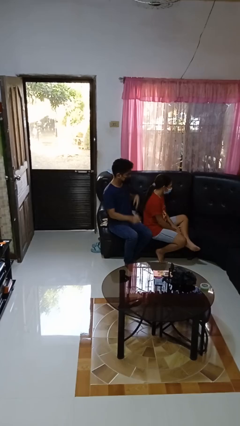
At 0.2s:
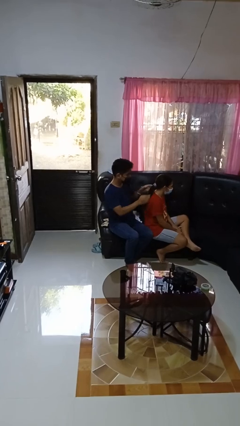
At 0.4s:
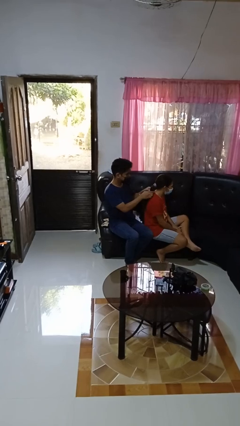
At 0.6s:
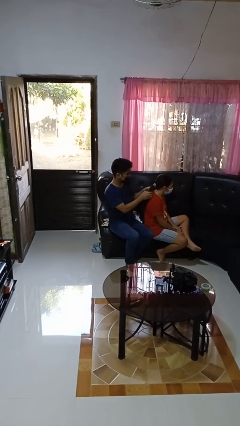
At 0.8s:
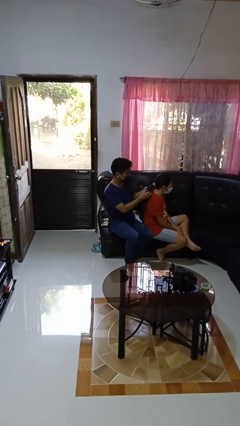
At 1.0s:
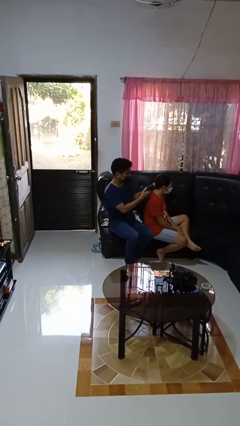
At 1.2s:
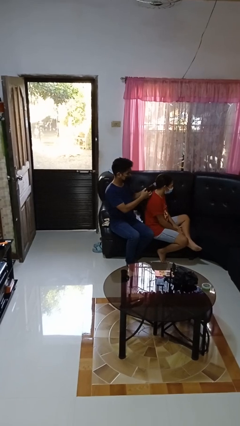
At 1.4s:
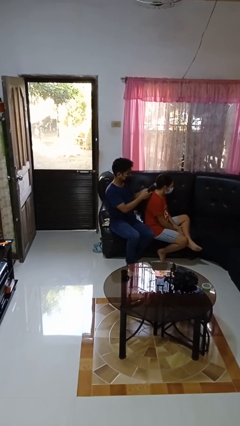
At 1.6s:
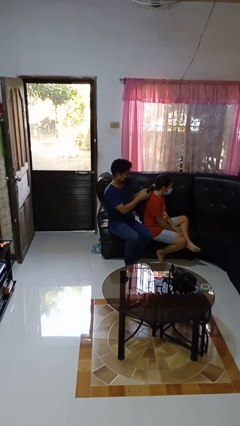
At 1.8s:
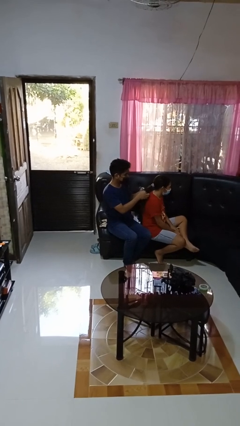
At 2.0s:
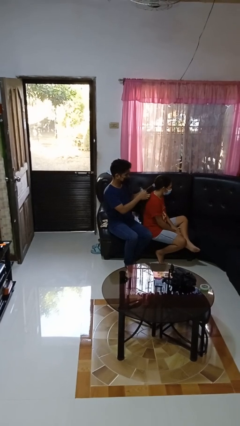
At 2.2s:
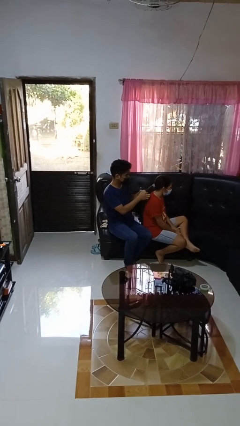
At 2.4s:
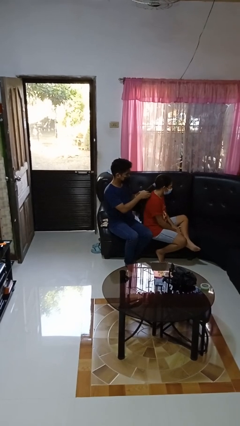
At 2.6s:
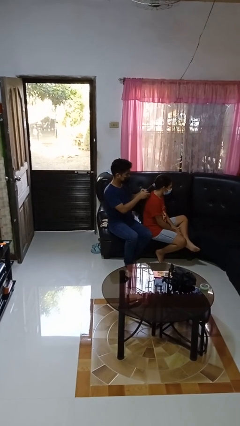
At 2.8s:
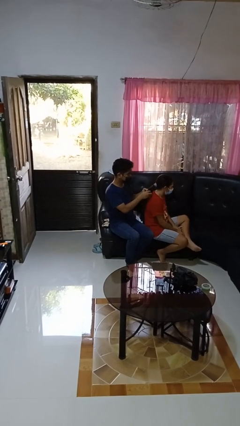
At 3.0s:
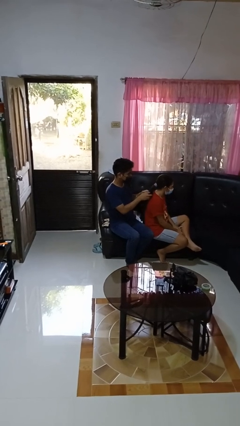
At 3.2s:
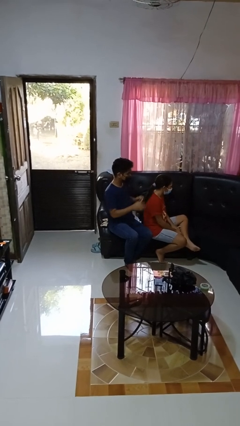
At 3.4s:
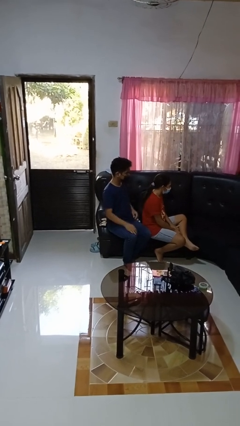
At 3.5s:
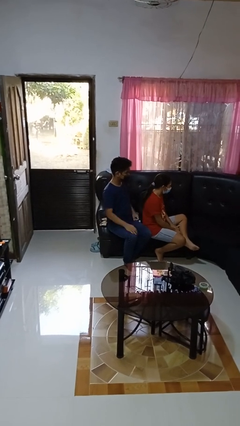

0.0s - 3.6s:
person braids hair of person

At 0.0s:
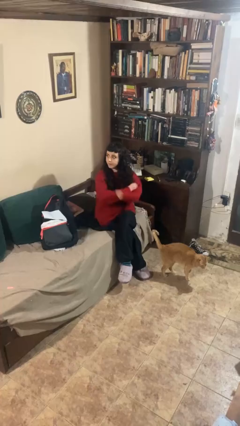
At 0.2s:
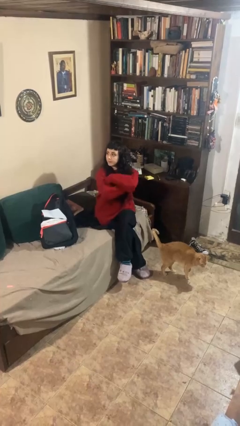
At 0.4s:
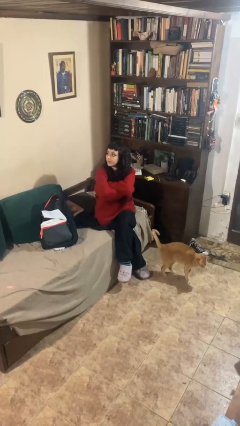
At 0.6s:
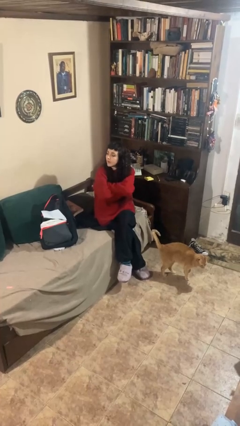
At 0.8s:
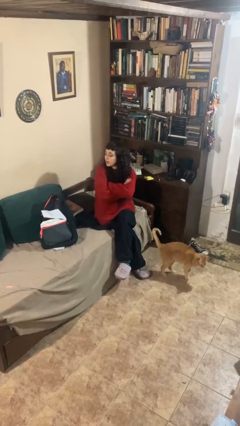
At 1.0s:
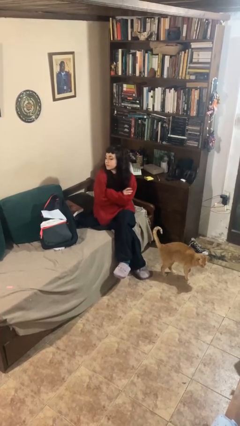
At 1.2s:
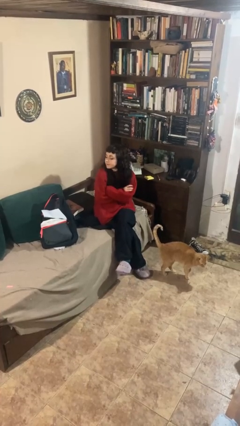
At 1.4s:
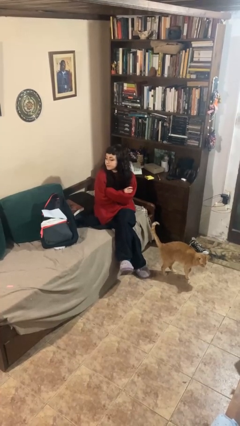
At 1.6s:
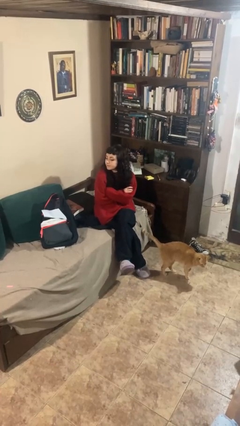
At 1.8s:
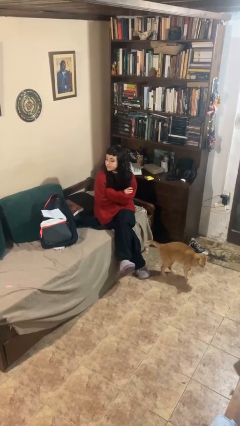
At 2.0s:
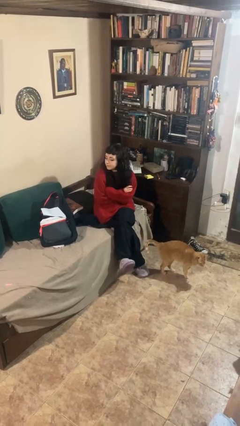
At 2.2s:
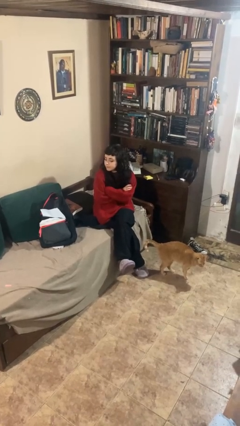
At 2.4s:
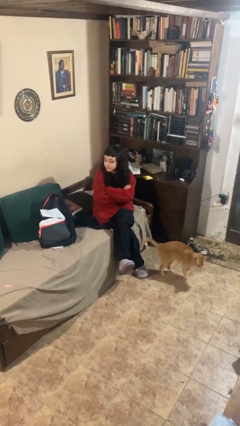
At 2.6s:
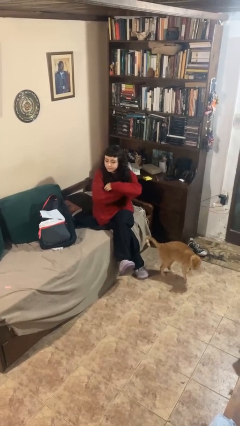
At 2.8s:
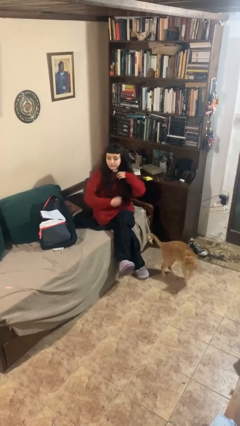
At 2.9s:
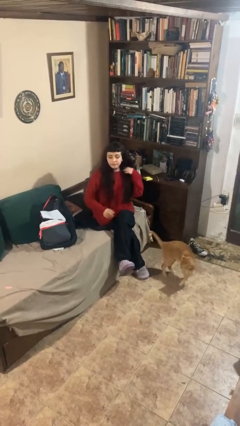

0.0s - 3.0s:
person crosses arms

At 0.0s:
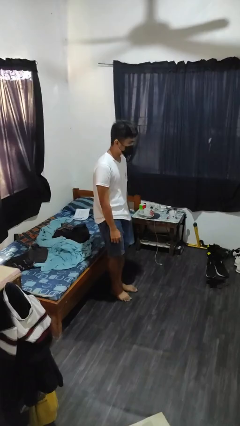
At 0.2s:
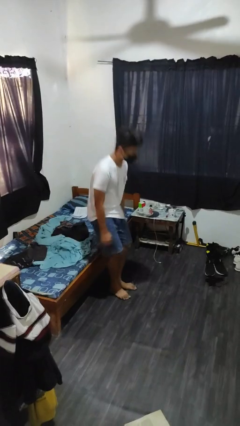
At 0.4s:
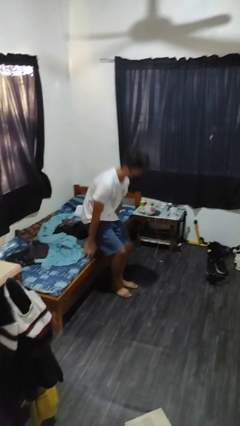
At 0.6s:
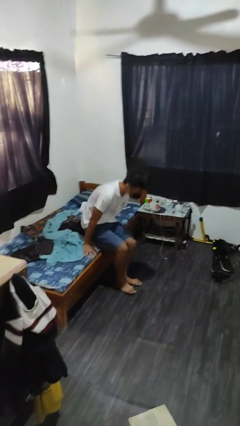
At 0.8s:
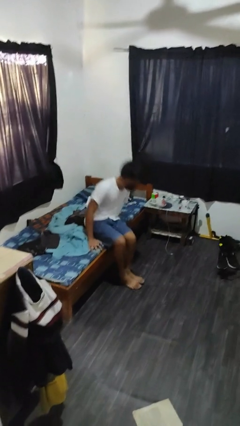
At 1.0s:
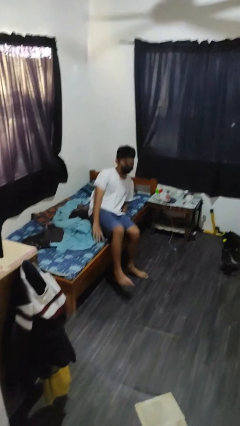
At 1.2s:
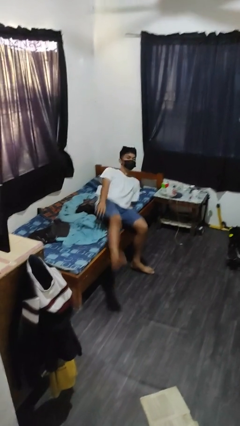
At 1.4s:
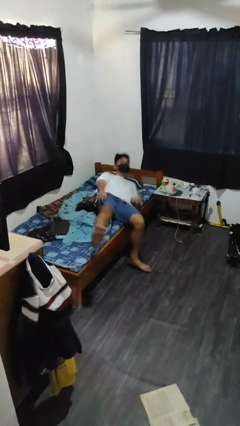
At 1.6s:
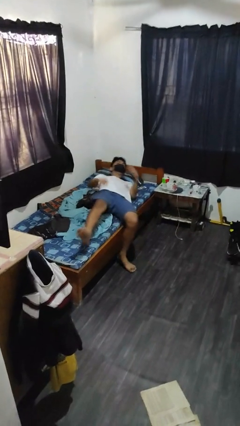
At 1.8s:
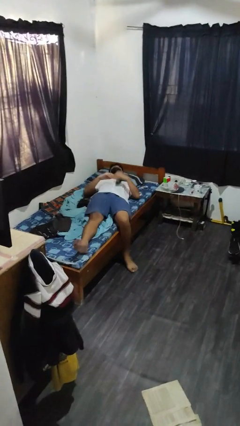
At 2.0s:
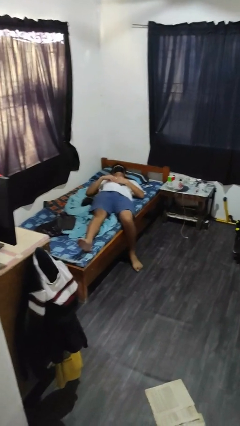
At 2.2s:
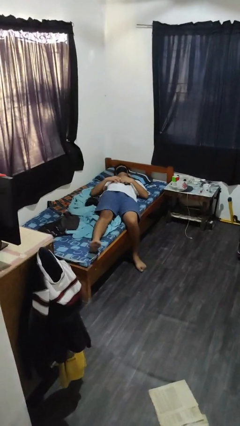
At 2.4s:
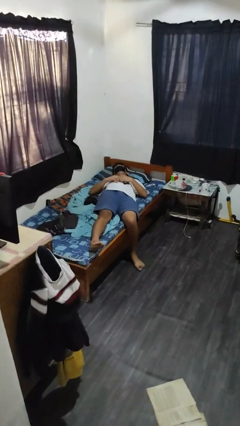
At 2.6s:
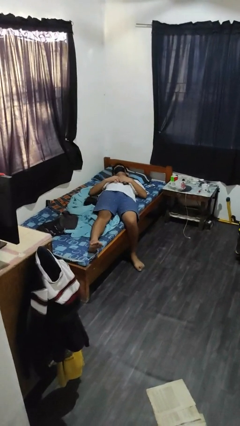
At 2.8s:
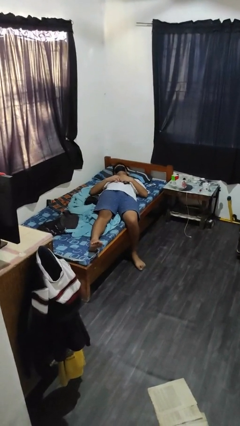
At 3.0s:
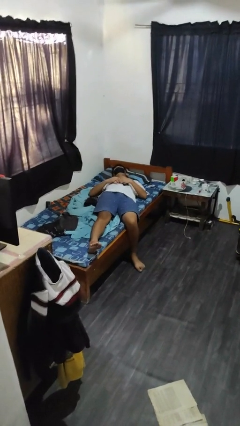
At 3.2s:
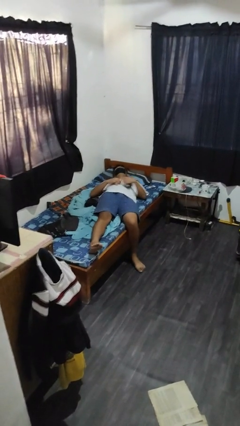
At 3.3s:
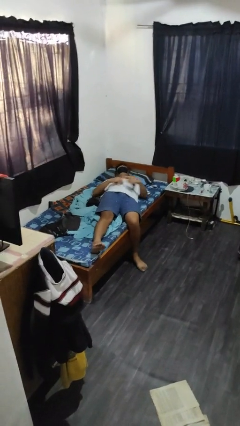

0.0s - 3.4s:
person lies down on bed

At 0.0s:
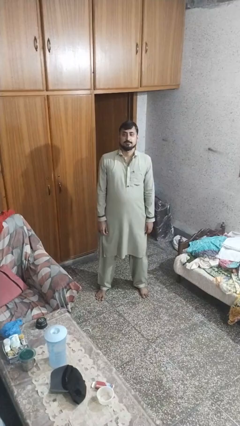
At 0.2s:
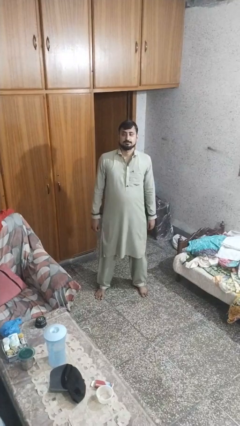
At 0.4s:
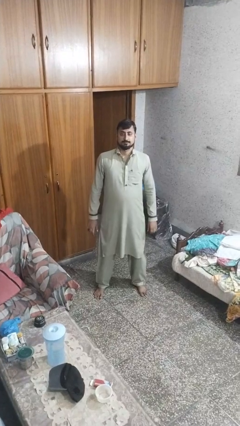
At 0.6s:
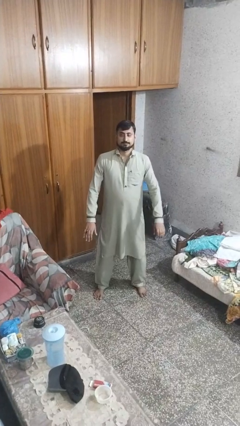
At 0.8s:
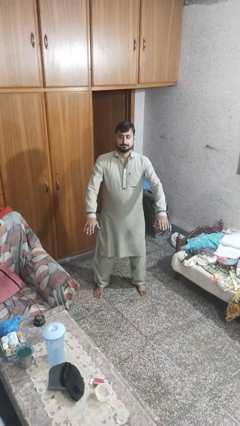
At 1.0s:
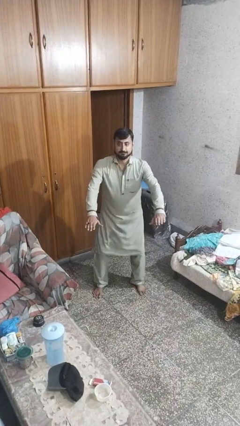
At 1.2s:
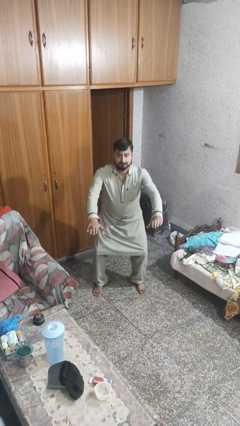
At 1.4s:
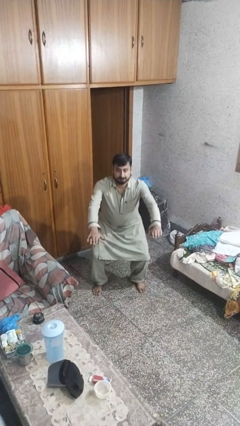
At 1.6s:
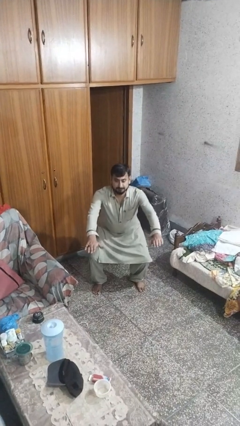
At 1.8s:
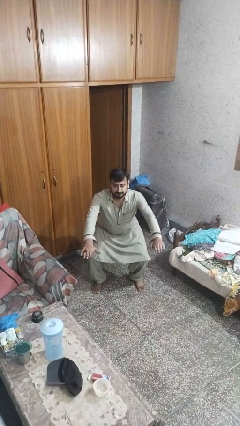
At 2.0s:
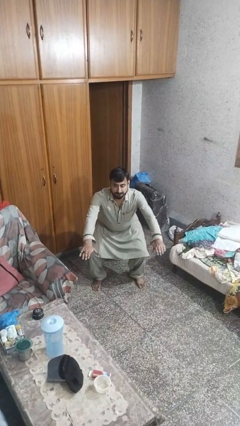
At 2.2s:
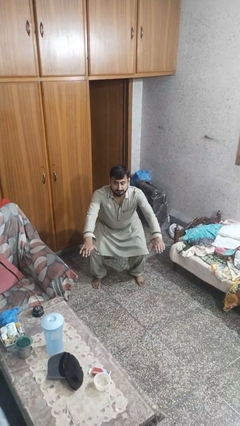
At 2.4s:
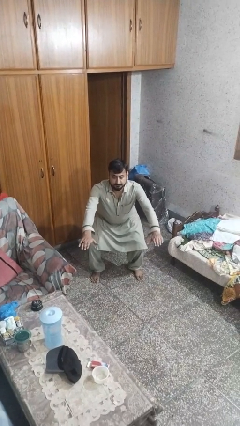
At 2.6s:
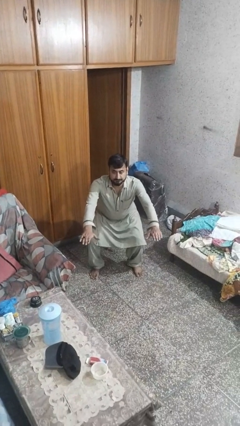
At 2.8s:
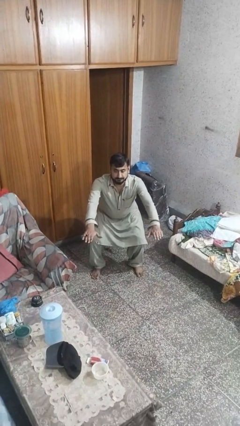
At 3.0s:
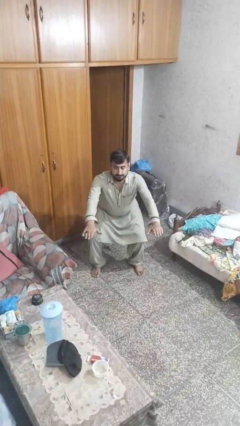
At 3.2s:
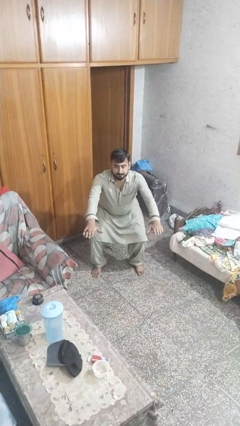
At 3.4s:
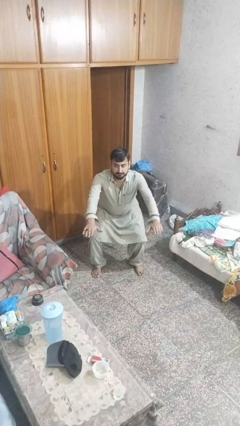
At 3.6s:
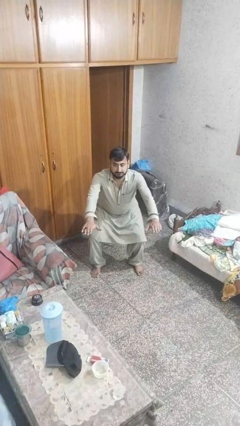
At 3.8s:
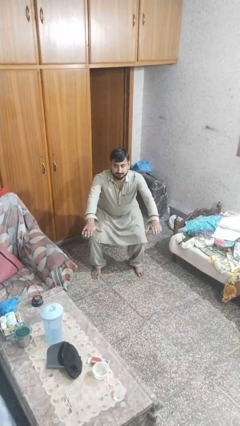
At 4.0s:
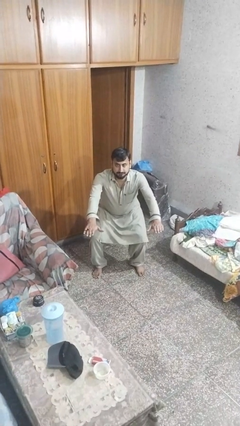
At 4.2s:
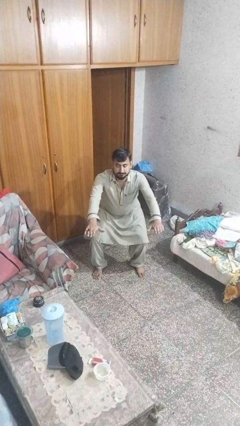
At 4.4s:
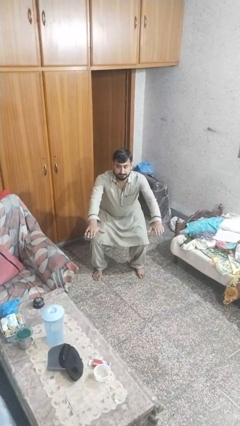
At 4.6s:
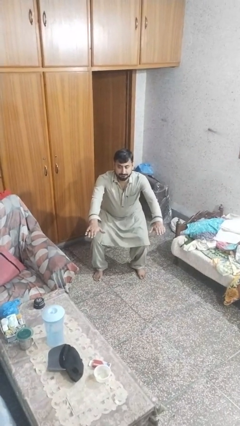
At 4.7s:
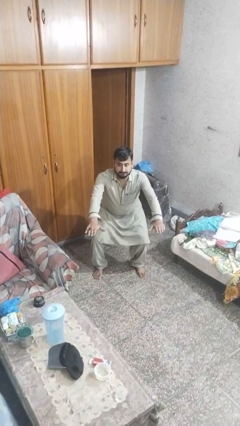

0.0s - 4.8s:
person squats

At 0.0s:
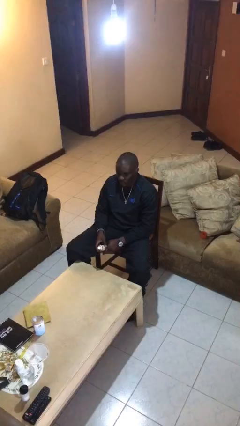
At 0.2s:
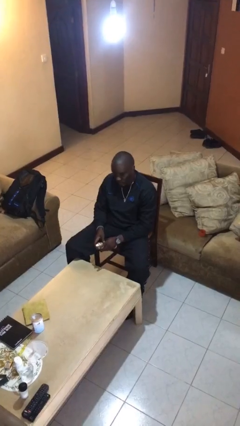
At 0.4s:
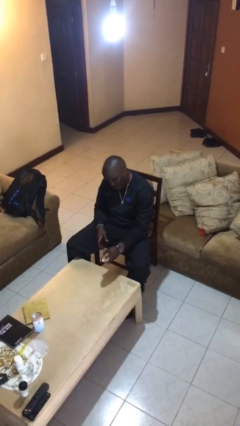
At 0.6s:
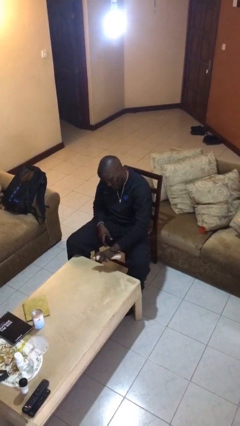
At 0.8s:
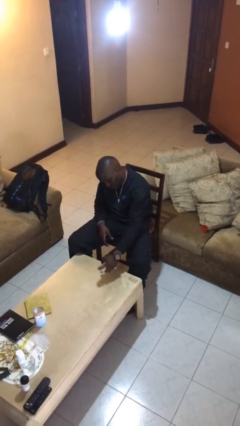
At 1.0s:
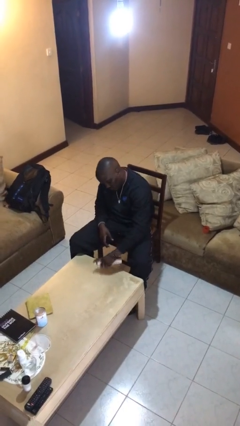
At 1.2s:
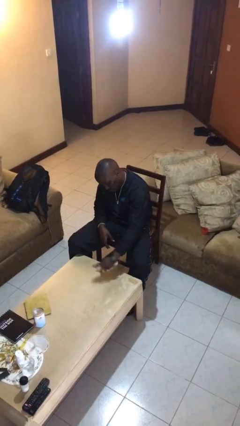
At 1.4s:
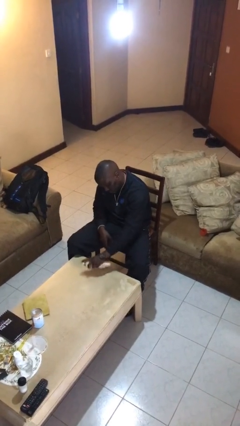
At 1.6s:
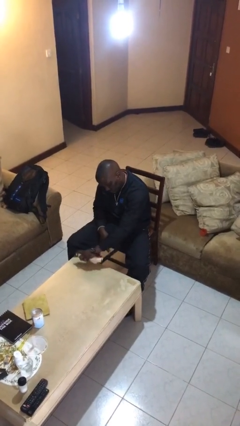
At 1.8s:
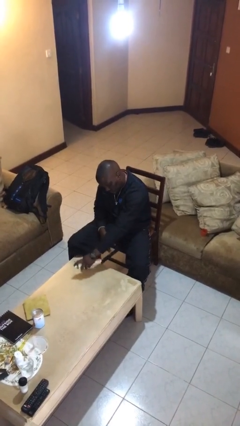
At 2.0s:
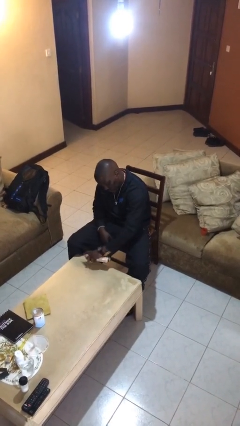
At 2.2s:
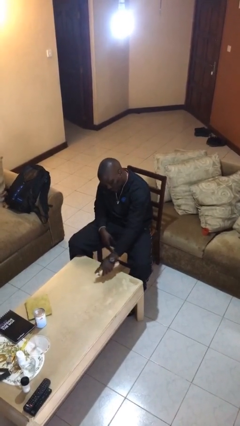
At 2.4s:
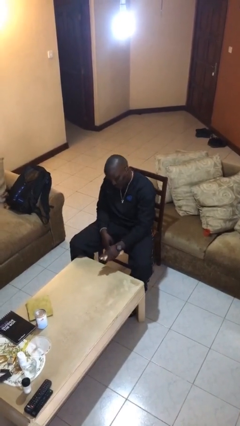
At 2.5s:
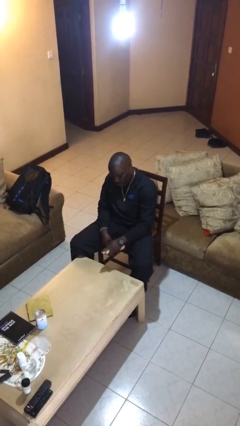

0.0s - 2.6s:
person sprays from bottle
